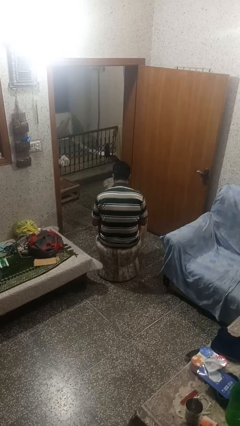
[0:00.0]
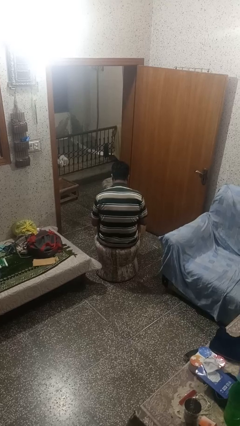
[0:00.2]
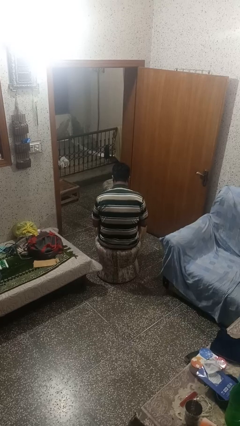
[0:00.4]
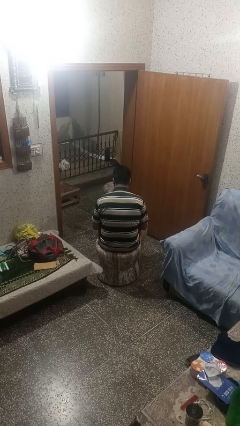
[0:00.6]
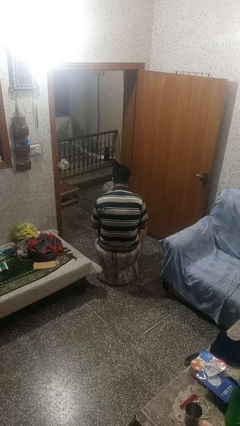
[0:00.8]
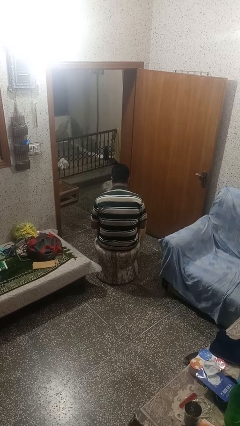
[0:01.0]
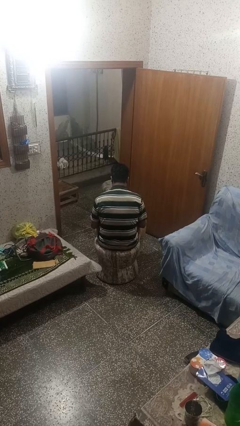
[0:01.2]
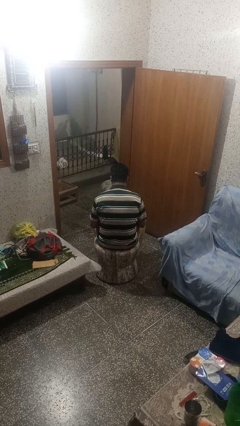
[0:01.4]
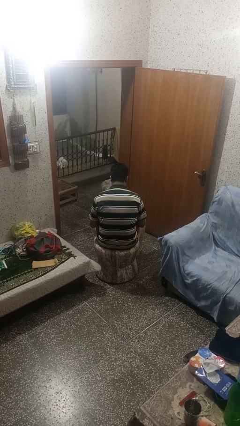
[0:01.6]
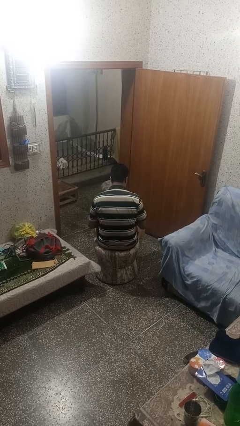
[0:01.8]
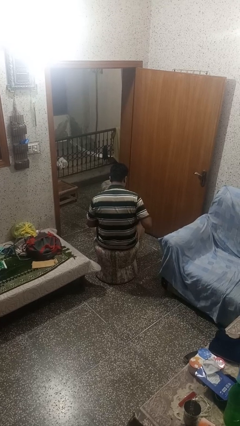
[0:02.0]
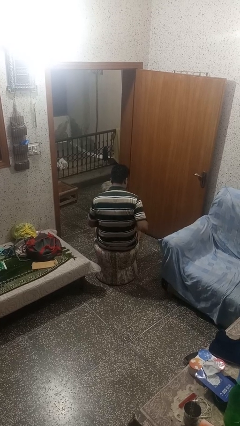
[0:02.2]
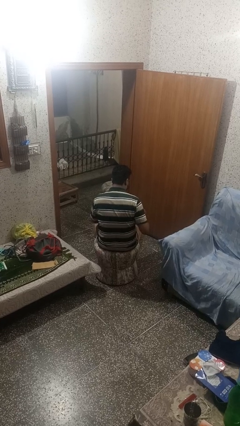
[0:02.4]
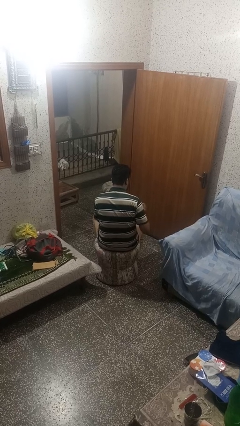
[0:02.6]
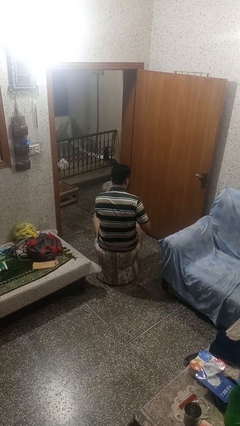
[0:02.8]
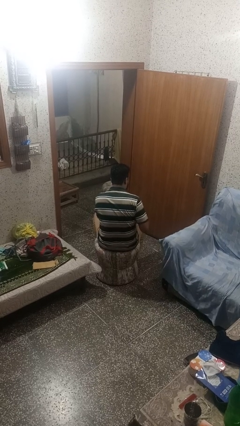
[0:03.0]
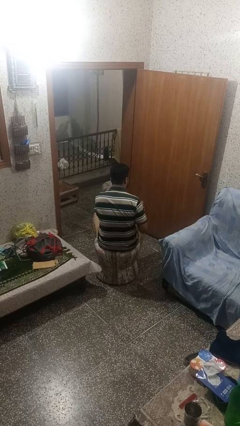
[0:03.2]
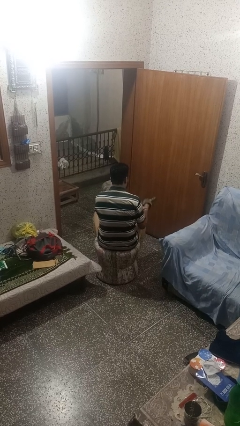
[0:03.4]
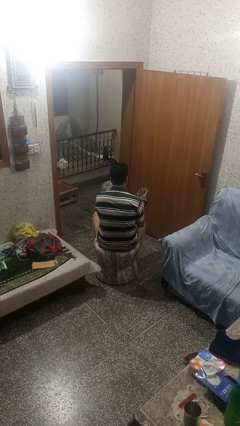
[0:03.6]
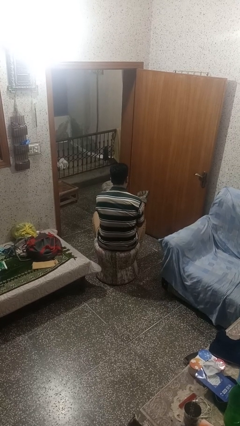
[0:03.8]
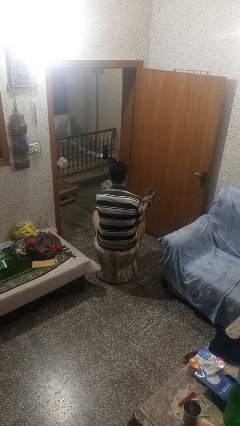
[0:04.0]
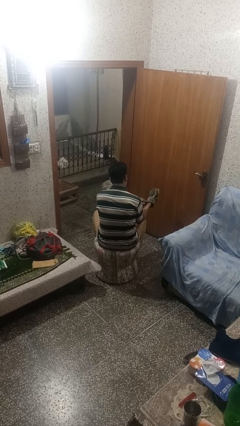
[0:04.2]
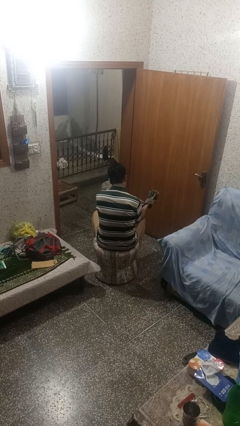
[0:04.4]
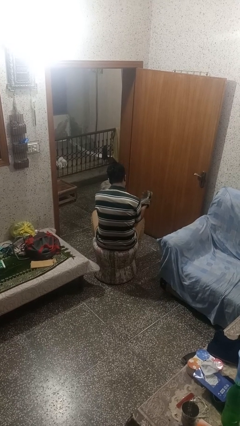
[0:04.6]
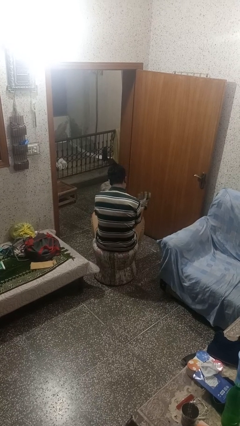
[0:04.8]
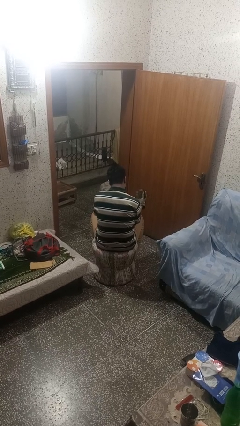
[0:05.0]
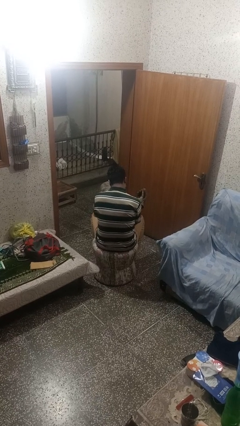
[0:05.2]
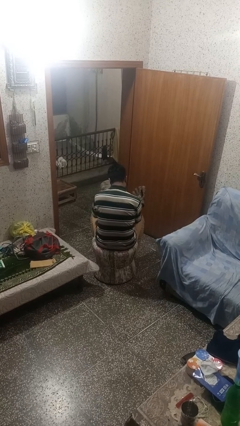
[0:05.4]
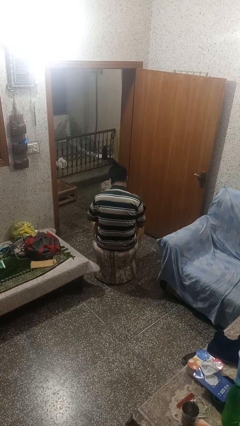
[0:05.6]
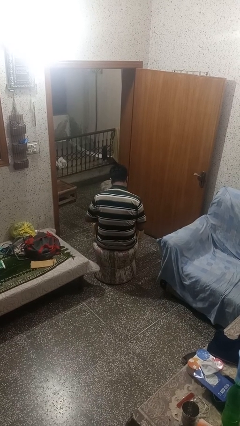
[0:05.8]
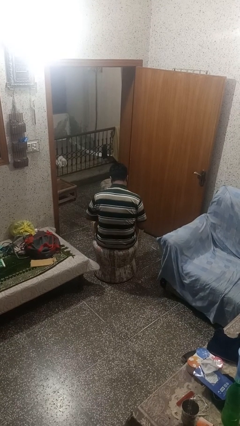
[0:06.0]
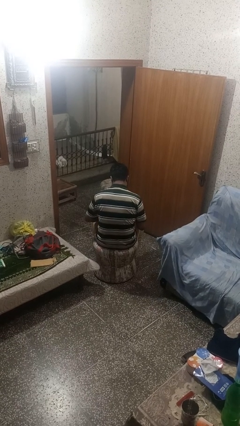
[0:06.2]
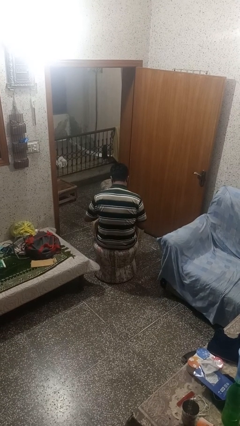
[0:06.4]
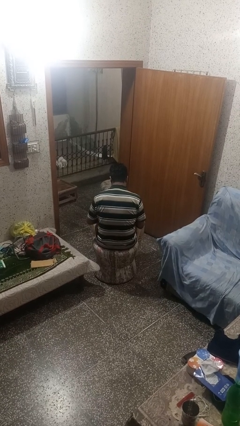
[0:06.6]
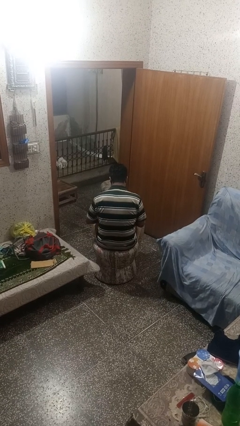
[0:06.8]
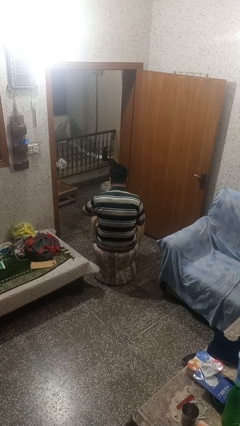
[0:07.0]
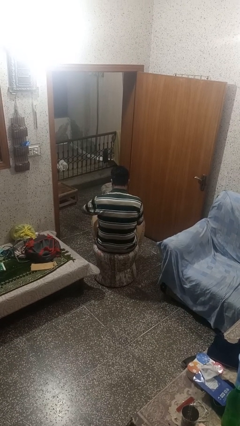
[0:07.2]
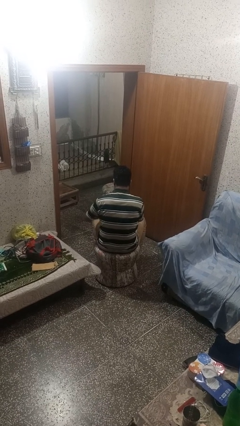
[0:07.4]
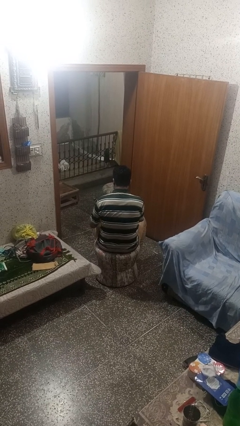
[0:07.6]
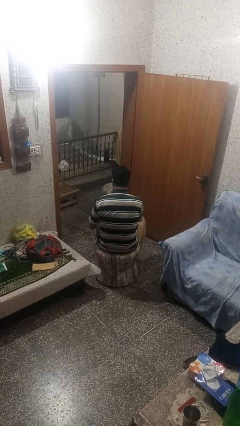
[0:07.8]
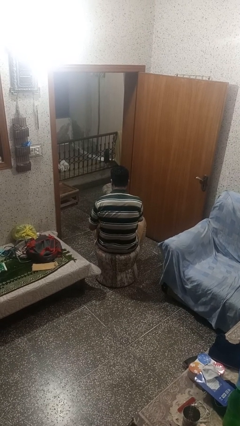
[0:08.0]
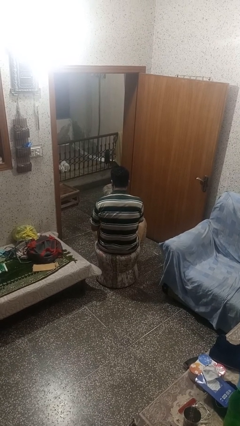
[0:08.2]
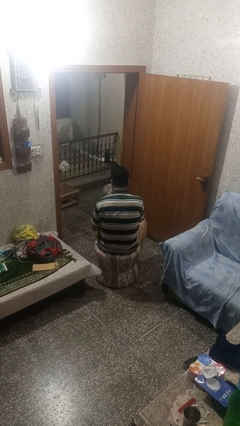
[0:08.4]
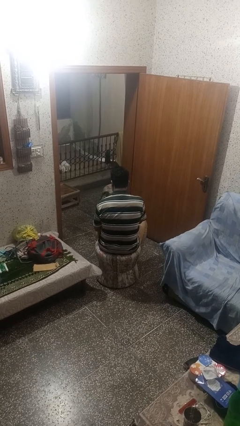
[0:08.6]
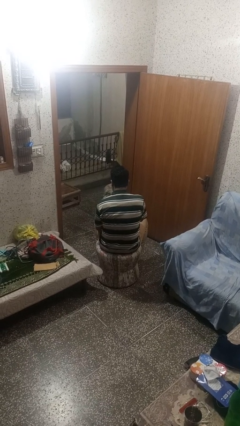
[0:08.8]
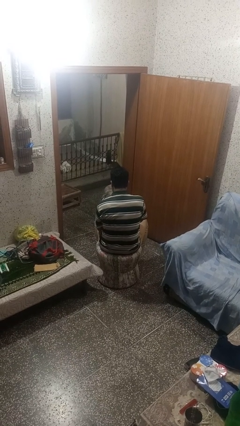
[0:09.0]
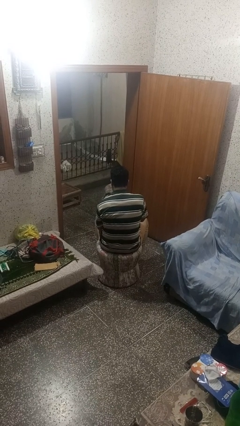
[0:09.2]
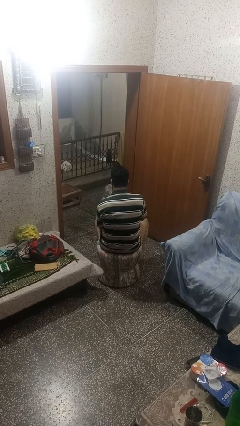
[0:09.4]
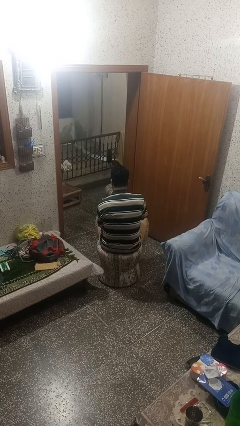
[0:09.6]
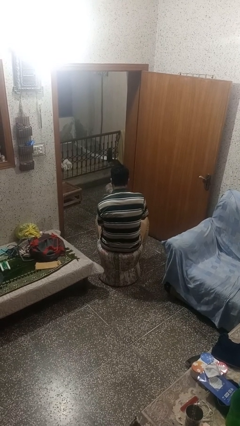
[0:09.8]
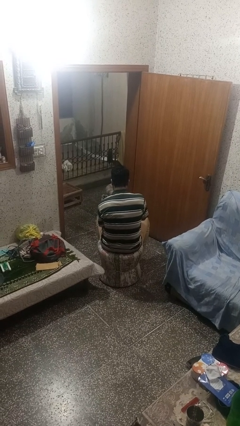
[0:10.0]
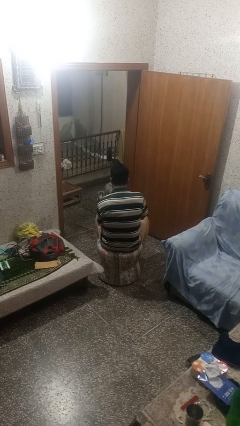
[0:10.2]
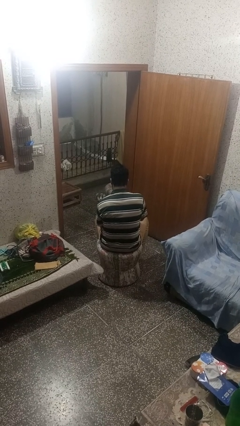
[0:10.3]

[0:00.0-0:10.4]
person puts on gloves

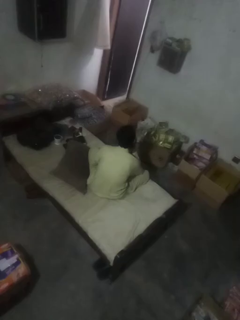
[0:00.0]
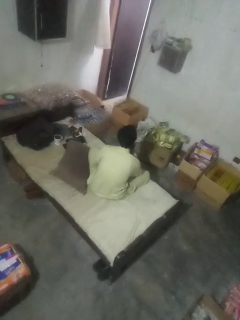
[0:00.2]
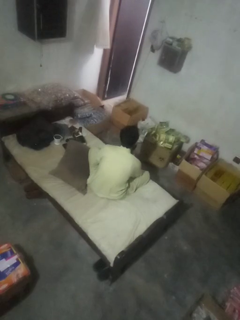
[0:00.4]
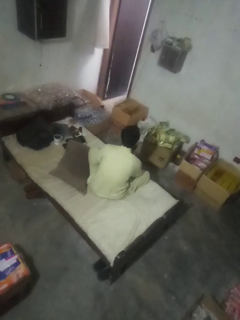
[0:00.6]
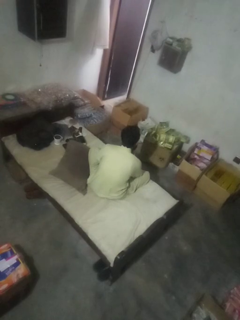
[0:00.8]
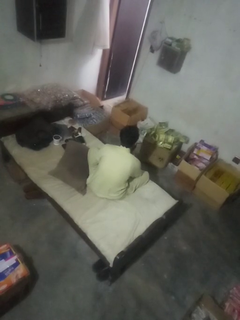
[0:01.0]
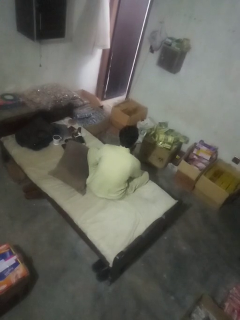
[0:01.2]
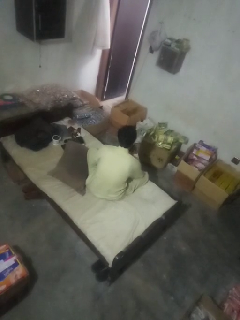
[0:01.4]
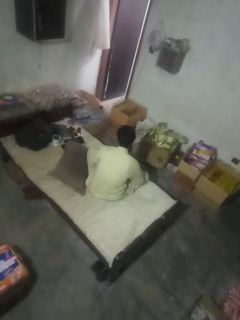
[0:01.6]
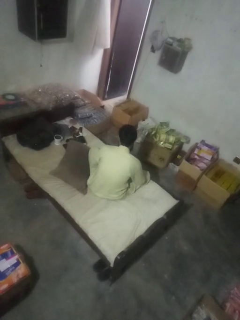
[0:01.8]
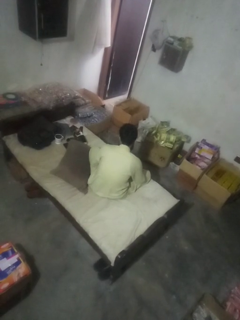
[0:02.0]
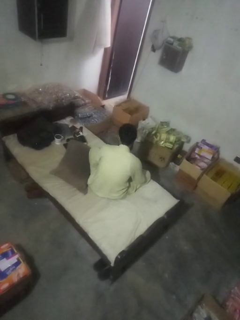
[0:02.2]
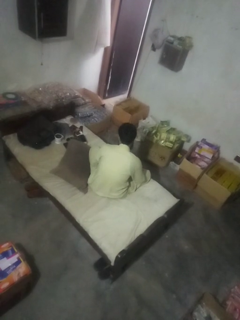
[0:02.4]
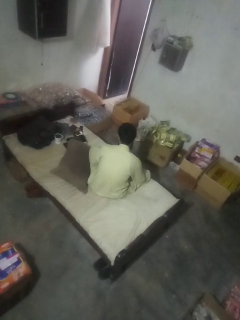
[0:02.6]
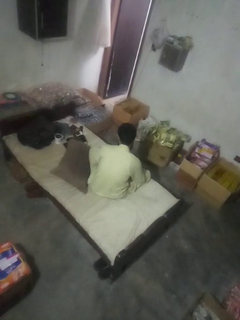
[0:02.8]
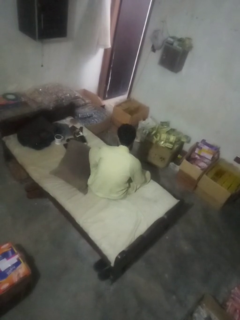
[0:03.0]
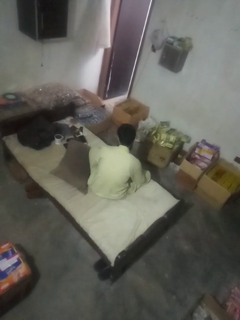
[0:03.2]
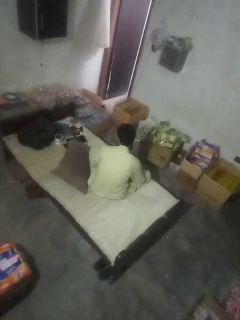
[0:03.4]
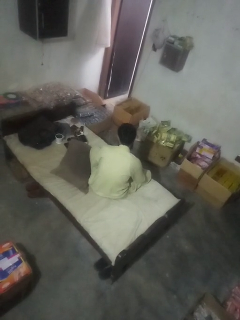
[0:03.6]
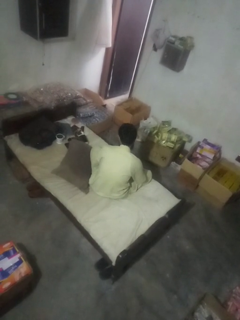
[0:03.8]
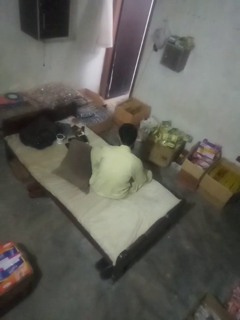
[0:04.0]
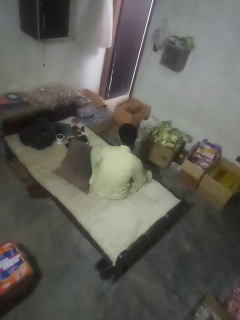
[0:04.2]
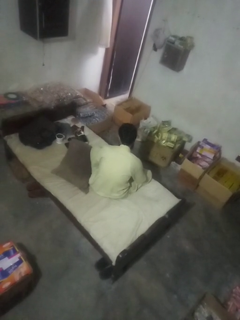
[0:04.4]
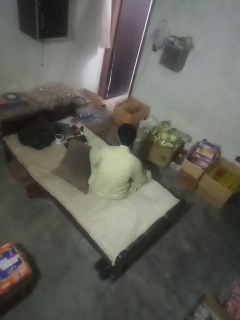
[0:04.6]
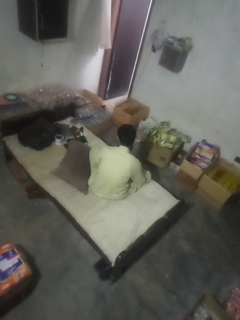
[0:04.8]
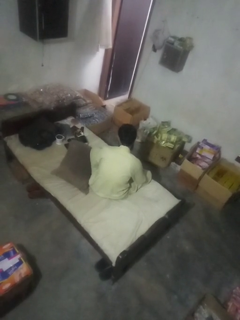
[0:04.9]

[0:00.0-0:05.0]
person strokes chin

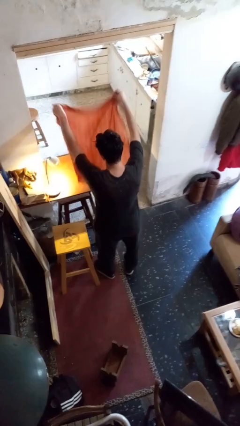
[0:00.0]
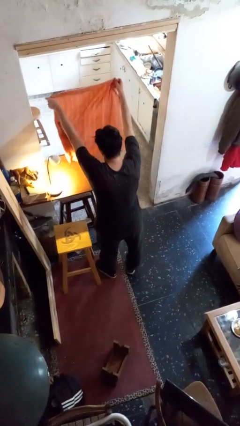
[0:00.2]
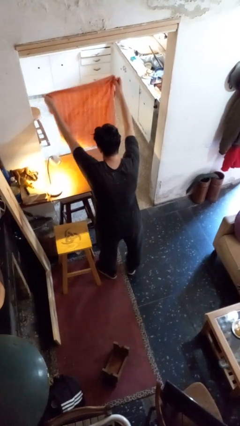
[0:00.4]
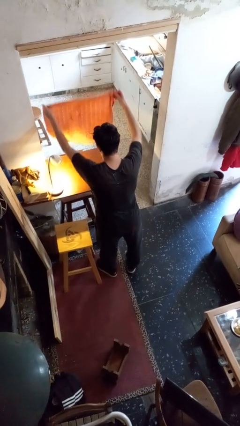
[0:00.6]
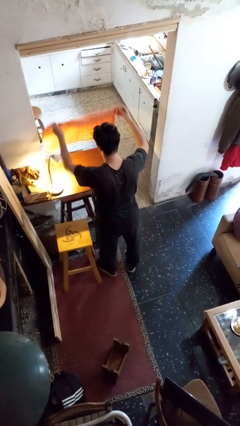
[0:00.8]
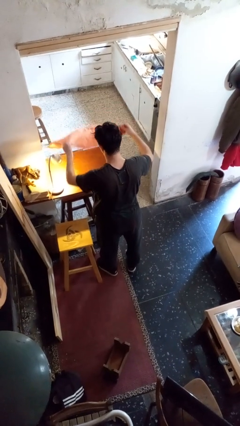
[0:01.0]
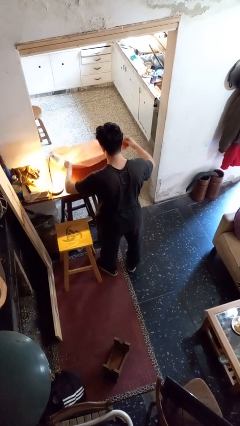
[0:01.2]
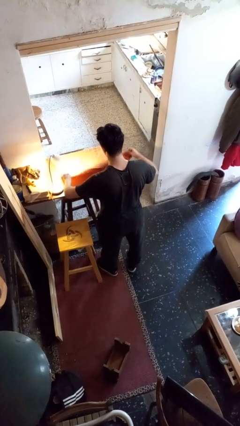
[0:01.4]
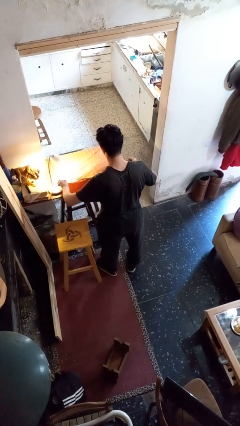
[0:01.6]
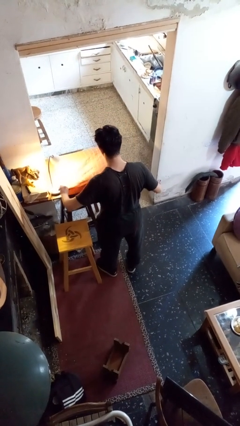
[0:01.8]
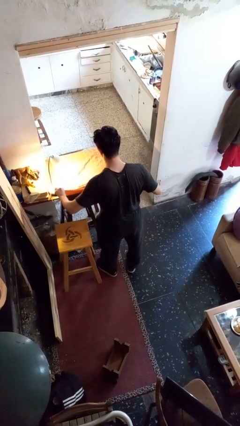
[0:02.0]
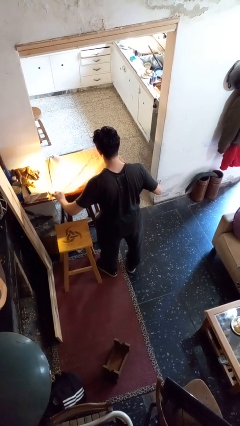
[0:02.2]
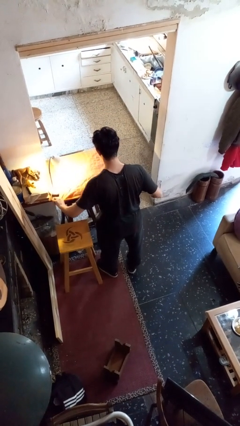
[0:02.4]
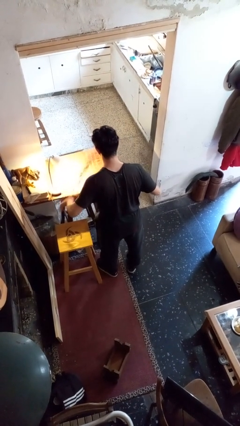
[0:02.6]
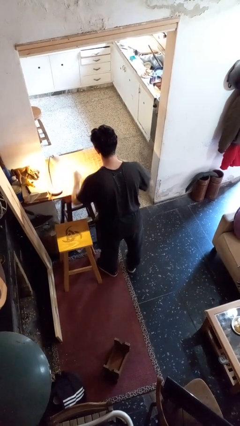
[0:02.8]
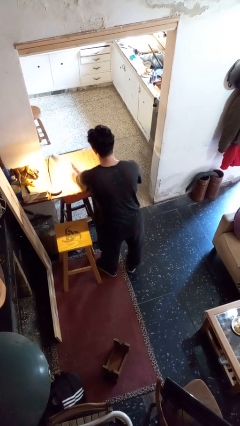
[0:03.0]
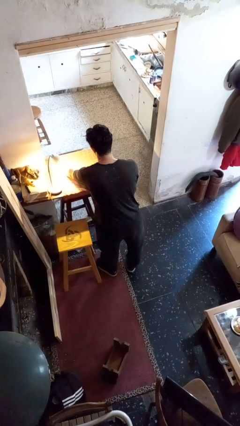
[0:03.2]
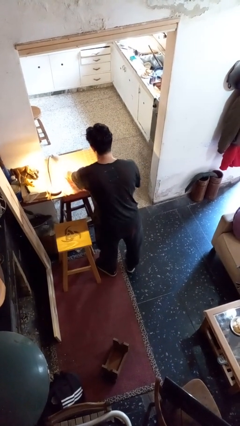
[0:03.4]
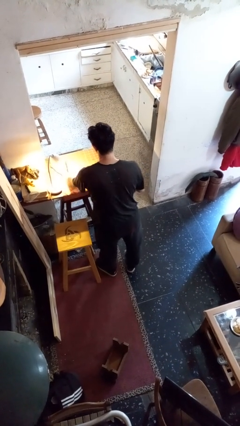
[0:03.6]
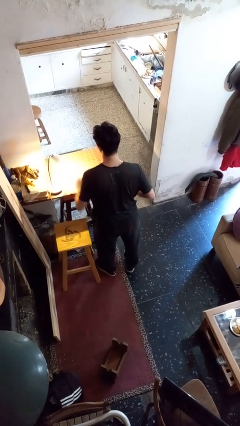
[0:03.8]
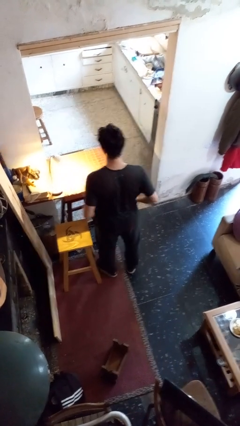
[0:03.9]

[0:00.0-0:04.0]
person spreads tablecloth

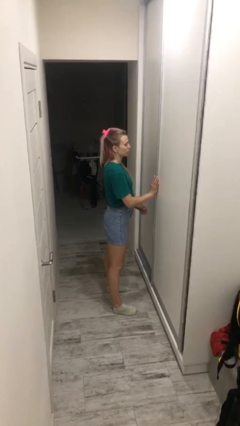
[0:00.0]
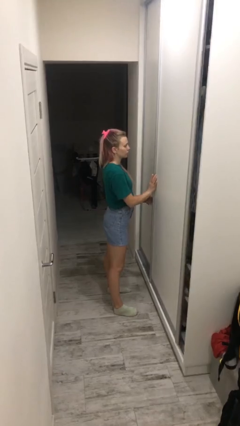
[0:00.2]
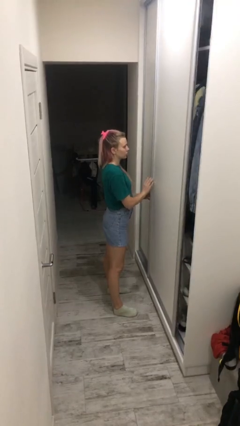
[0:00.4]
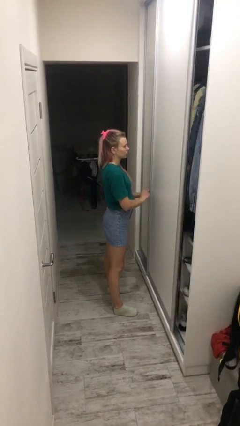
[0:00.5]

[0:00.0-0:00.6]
person opens sliding door
